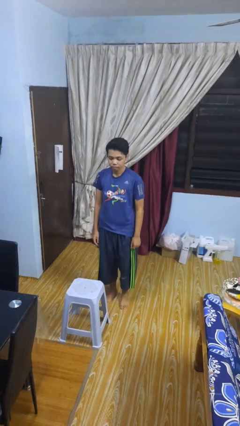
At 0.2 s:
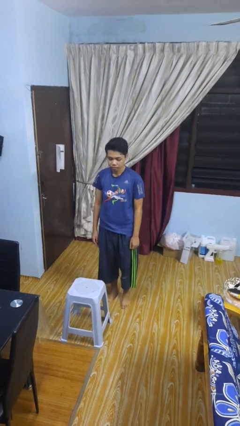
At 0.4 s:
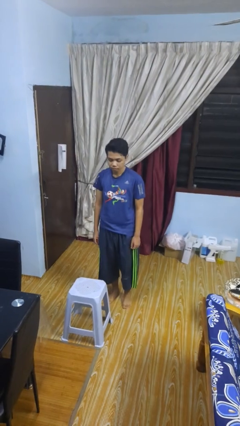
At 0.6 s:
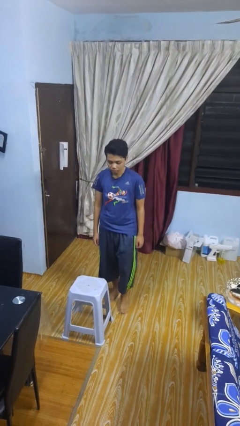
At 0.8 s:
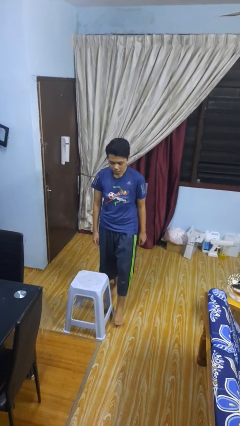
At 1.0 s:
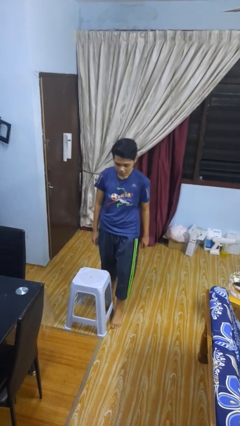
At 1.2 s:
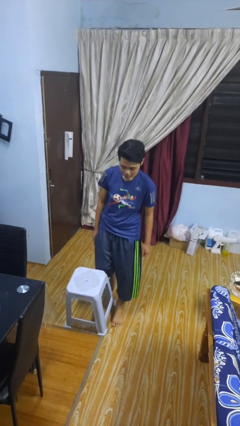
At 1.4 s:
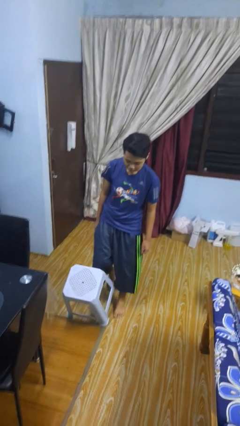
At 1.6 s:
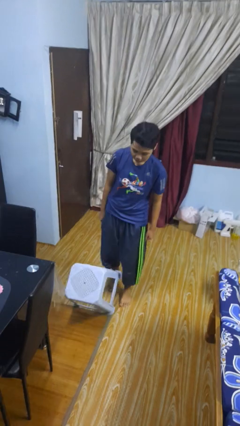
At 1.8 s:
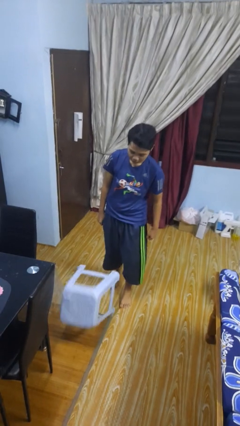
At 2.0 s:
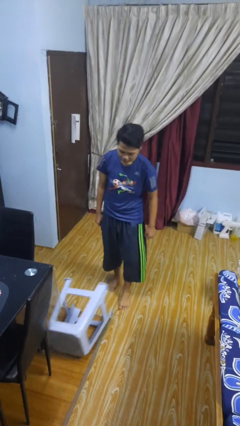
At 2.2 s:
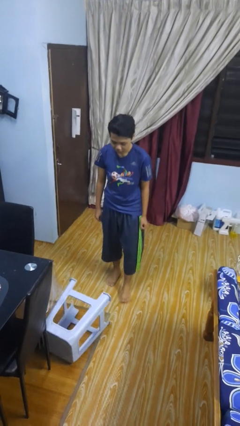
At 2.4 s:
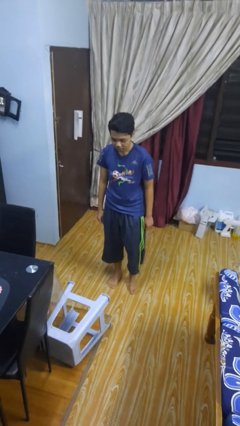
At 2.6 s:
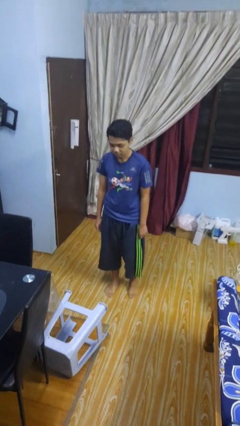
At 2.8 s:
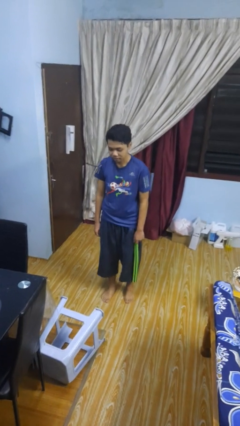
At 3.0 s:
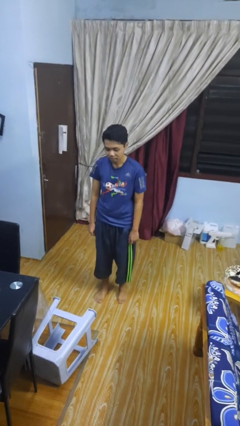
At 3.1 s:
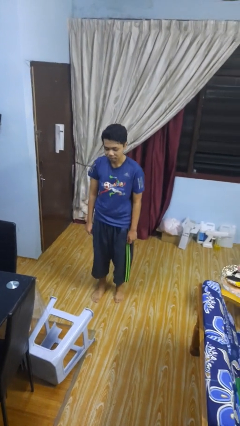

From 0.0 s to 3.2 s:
person knocks over furniture

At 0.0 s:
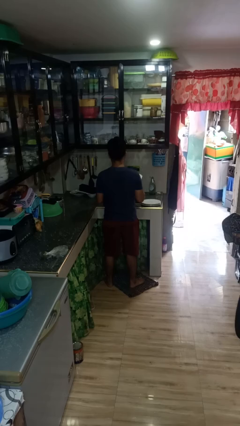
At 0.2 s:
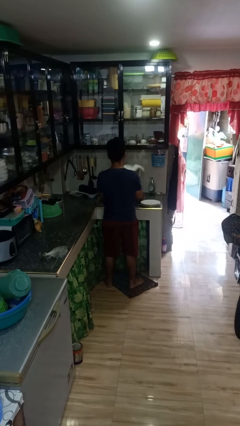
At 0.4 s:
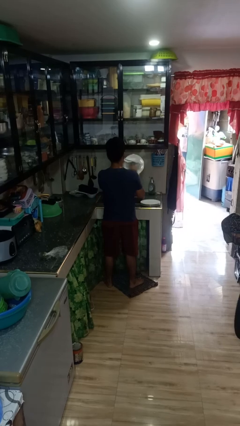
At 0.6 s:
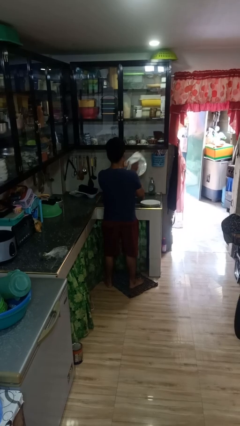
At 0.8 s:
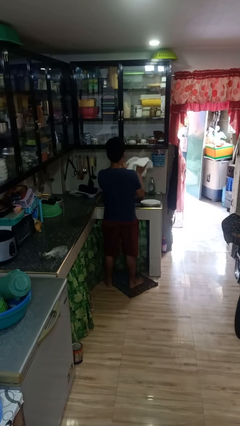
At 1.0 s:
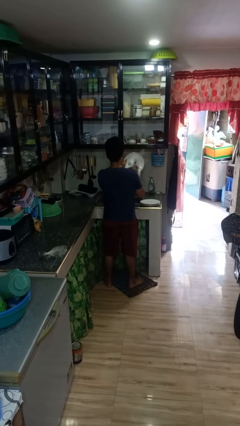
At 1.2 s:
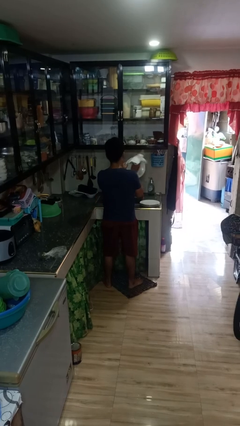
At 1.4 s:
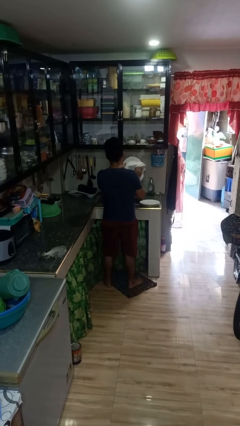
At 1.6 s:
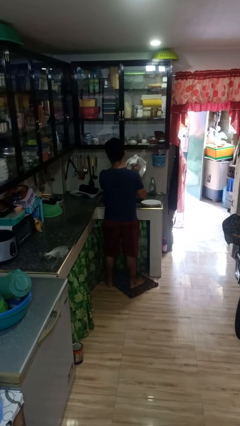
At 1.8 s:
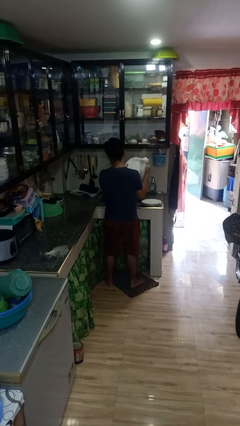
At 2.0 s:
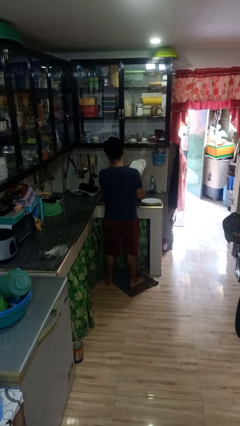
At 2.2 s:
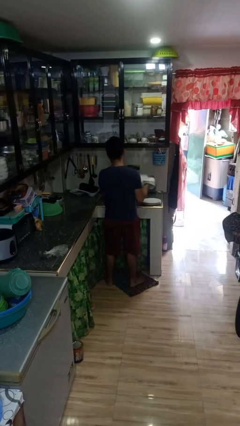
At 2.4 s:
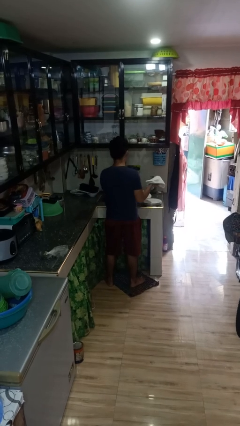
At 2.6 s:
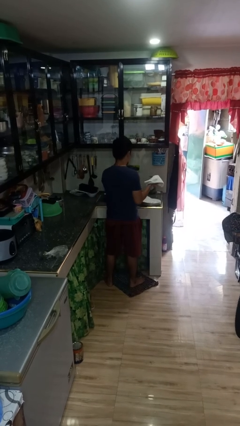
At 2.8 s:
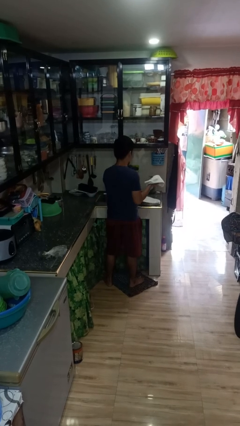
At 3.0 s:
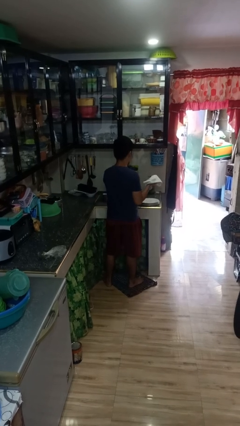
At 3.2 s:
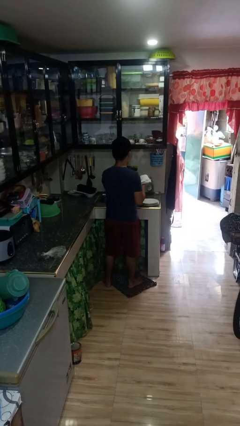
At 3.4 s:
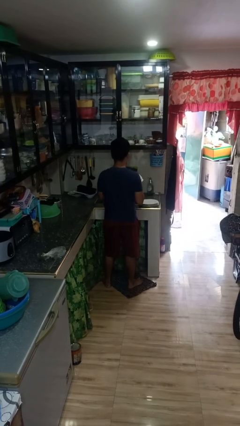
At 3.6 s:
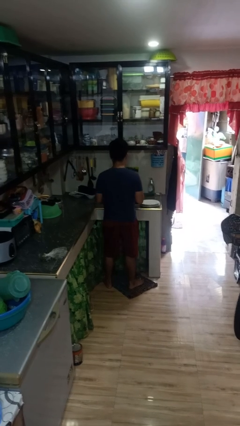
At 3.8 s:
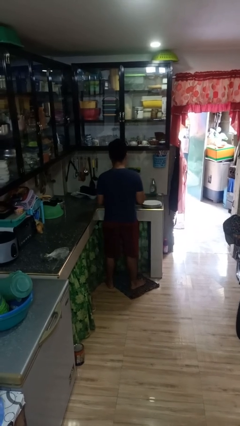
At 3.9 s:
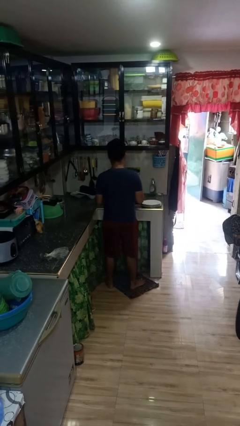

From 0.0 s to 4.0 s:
person dries dish

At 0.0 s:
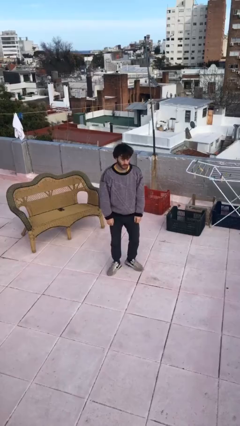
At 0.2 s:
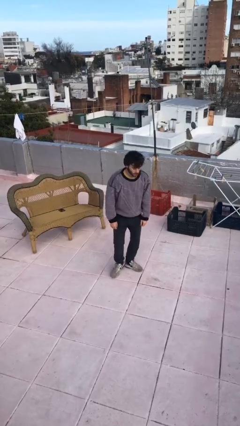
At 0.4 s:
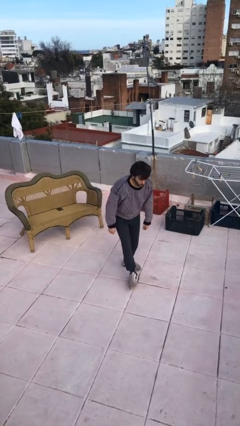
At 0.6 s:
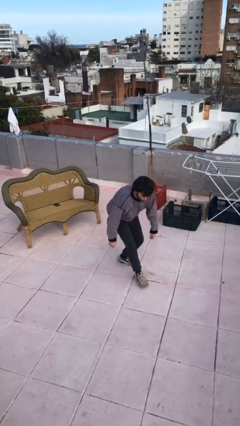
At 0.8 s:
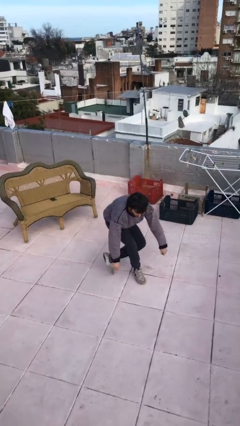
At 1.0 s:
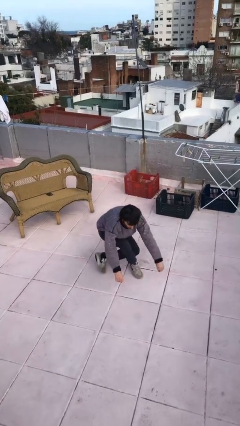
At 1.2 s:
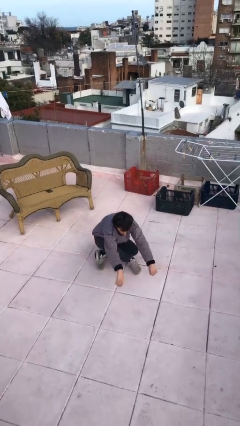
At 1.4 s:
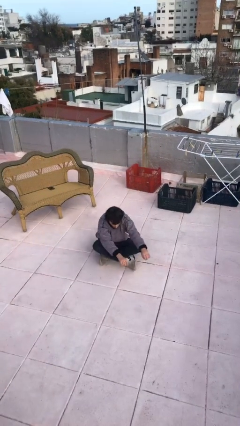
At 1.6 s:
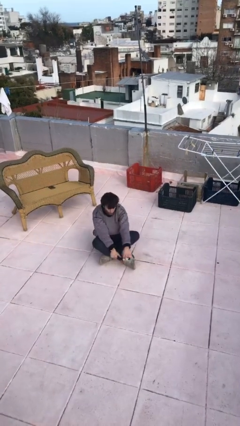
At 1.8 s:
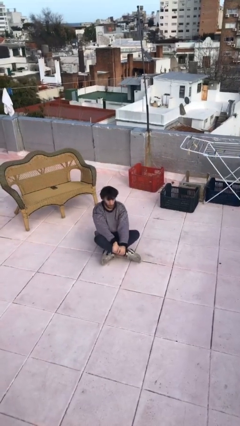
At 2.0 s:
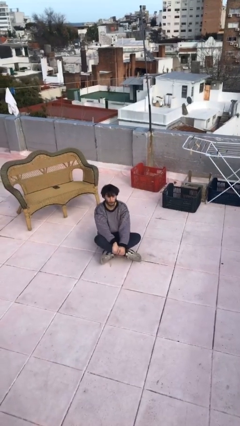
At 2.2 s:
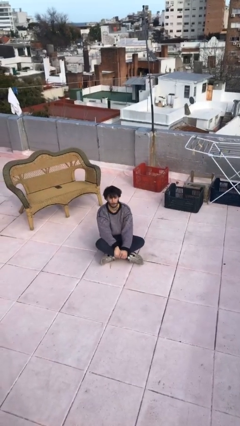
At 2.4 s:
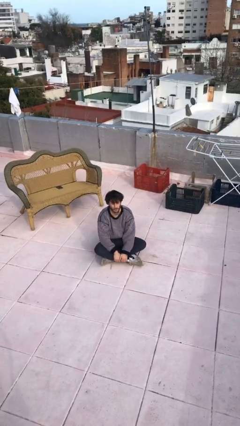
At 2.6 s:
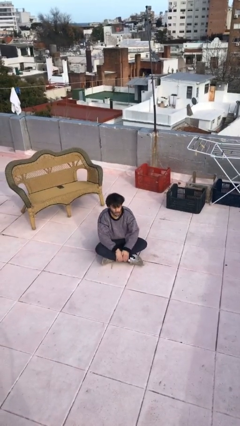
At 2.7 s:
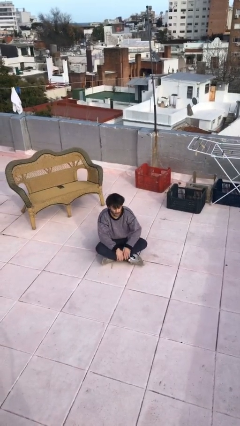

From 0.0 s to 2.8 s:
person sits crisscross

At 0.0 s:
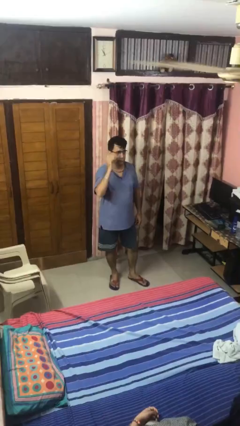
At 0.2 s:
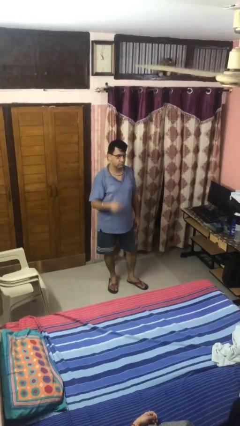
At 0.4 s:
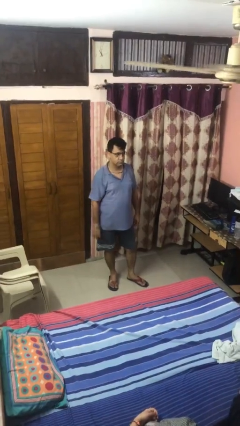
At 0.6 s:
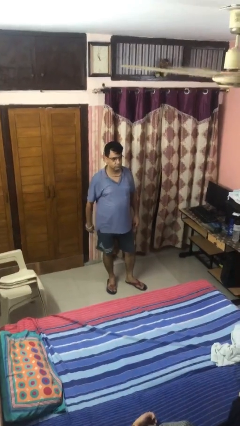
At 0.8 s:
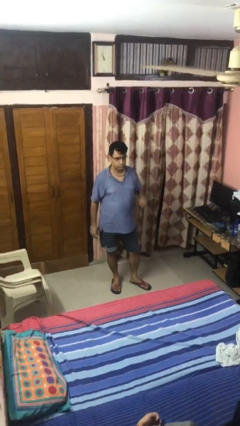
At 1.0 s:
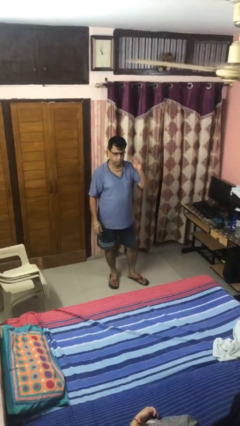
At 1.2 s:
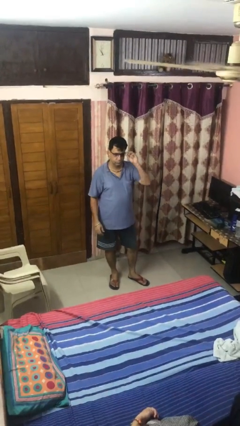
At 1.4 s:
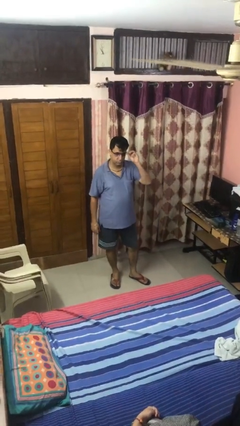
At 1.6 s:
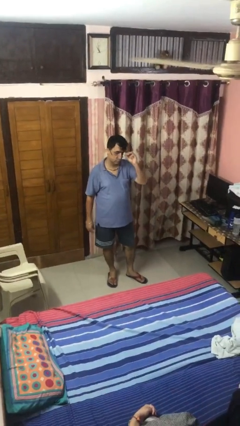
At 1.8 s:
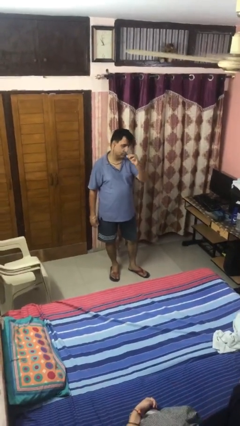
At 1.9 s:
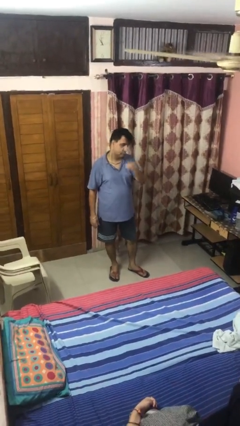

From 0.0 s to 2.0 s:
person takes off glasses

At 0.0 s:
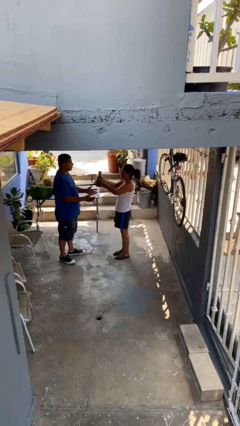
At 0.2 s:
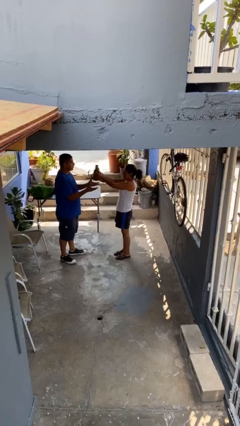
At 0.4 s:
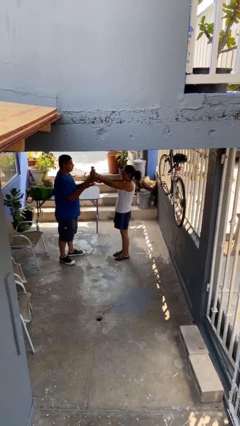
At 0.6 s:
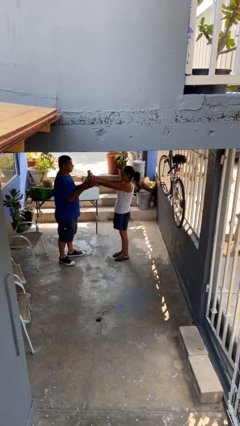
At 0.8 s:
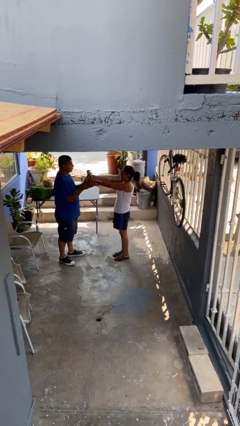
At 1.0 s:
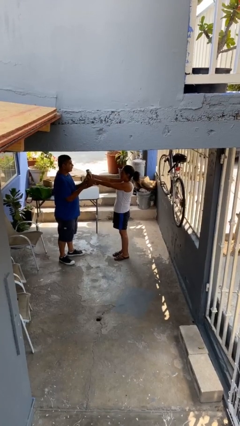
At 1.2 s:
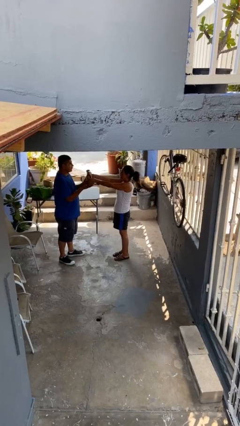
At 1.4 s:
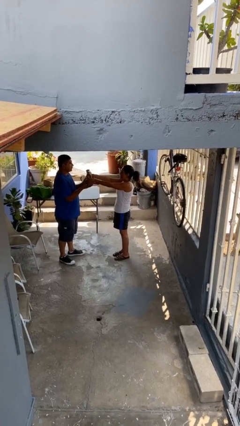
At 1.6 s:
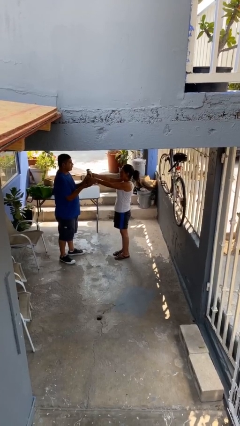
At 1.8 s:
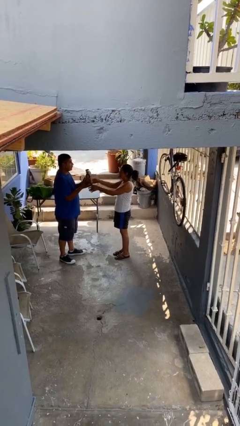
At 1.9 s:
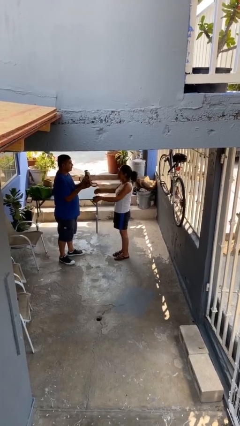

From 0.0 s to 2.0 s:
person transfers object to person

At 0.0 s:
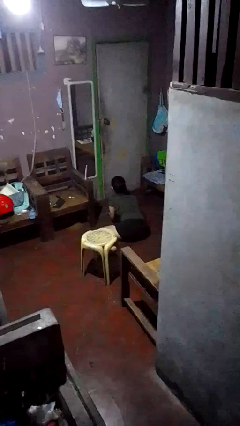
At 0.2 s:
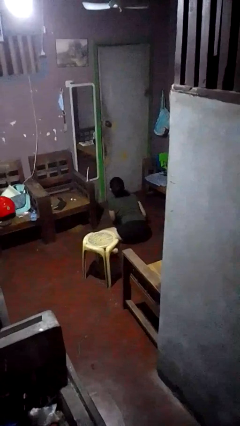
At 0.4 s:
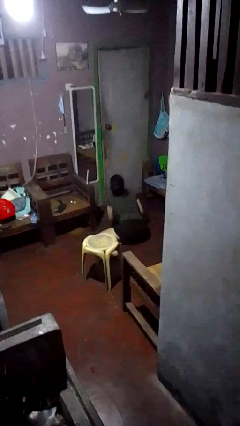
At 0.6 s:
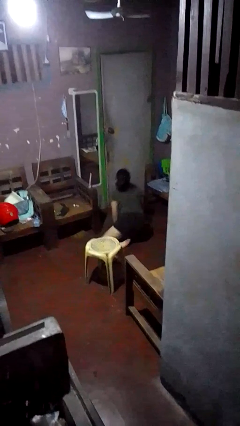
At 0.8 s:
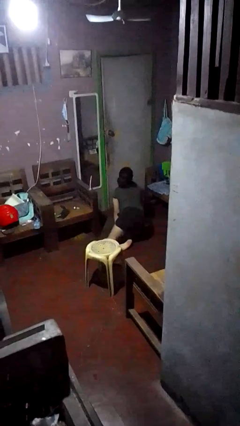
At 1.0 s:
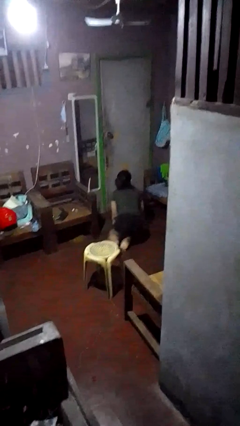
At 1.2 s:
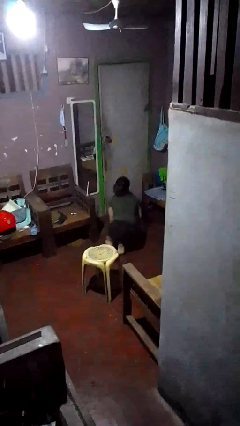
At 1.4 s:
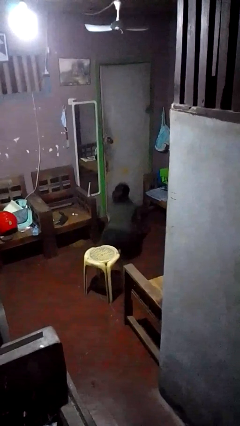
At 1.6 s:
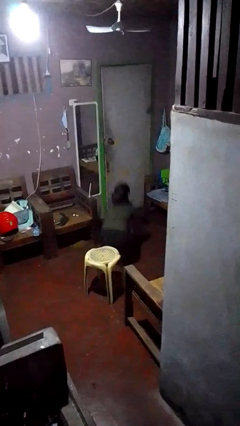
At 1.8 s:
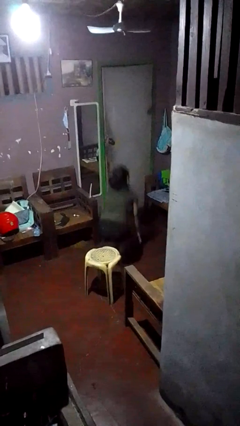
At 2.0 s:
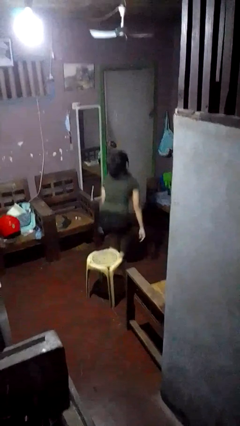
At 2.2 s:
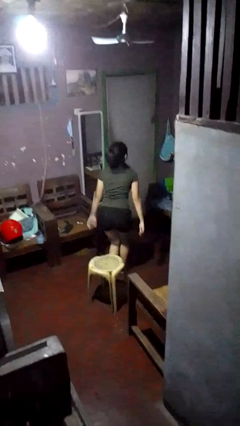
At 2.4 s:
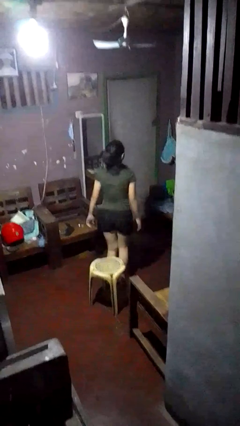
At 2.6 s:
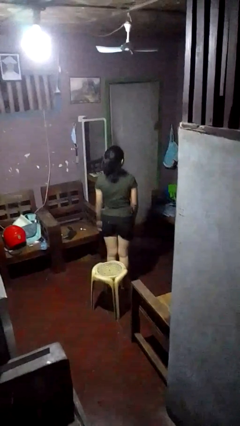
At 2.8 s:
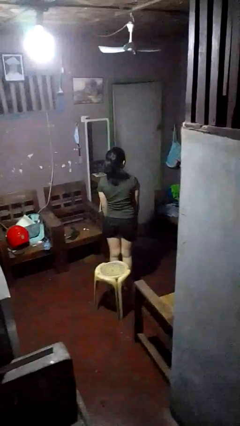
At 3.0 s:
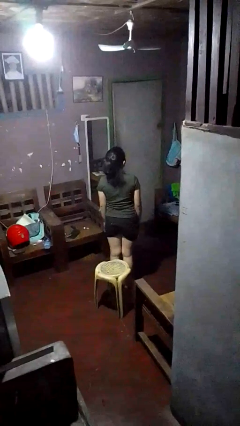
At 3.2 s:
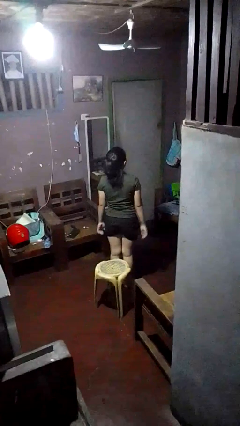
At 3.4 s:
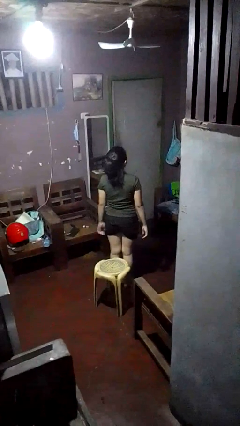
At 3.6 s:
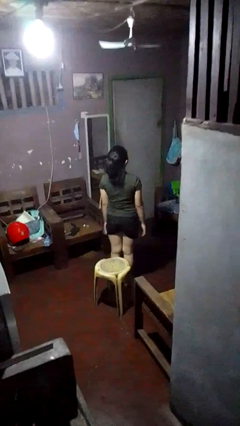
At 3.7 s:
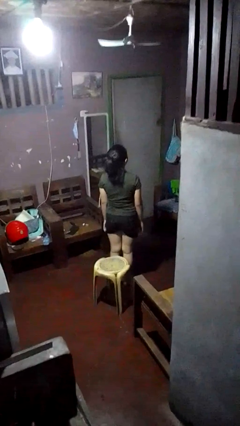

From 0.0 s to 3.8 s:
person stands up from floor
